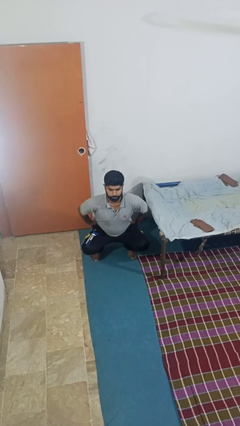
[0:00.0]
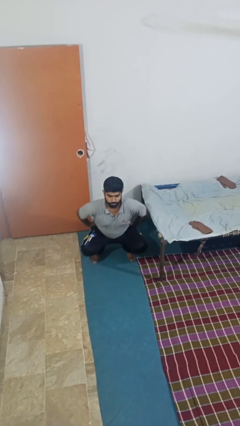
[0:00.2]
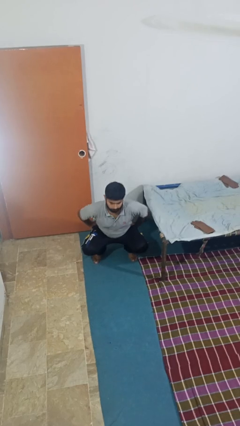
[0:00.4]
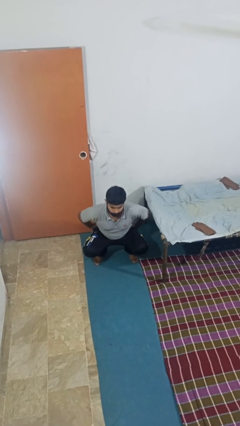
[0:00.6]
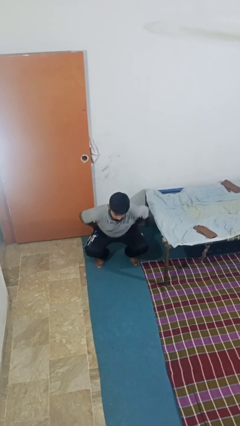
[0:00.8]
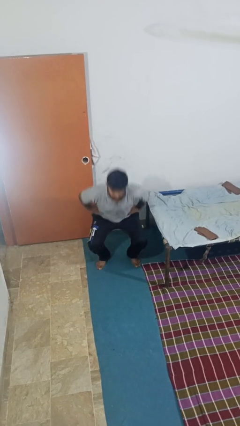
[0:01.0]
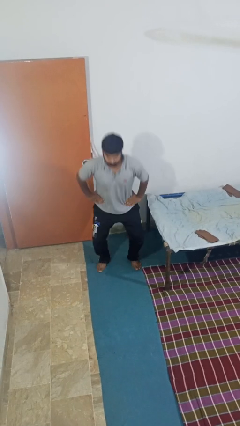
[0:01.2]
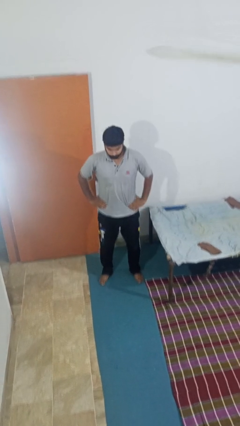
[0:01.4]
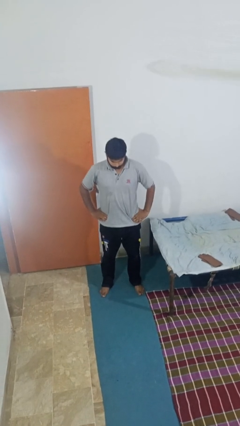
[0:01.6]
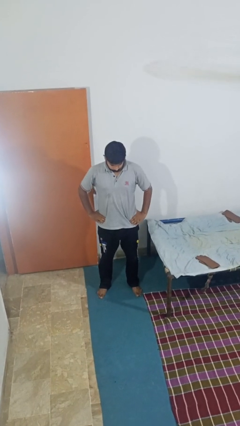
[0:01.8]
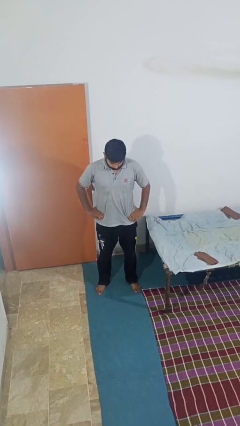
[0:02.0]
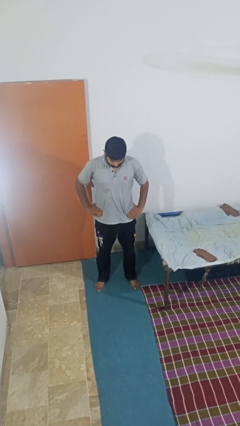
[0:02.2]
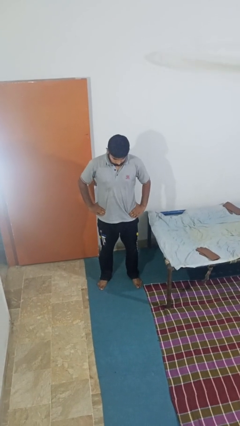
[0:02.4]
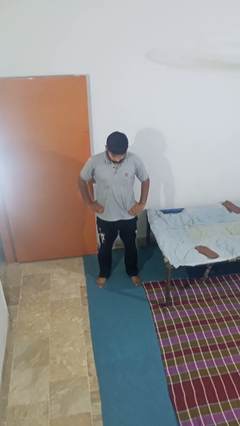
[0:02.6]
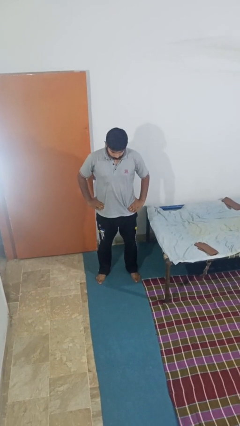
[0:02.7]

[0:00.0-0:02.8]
person stands up

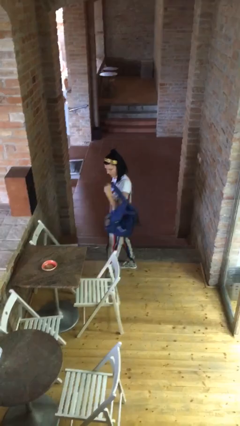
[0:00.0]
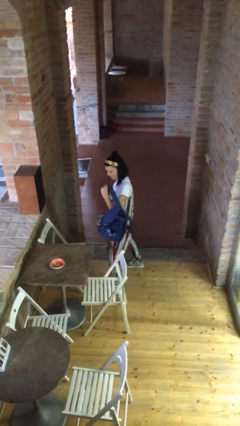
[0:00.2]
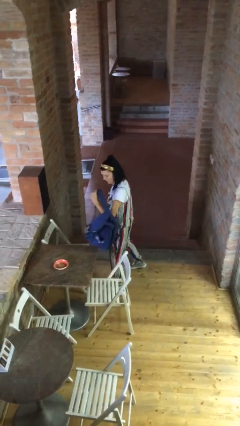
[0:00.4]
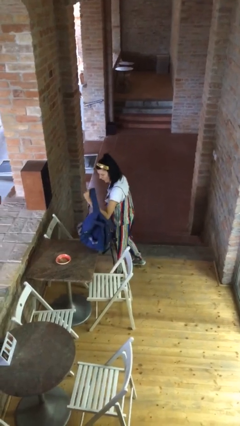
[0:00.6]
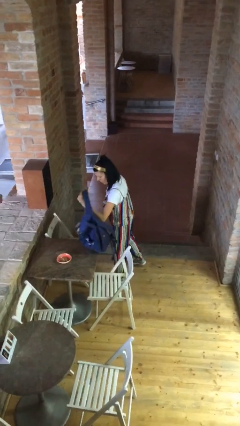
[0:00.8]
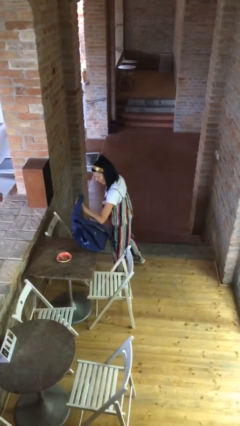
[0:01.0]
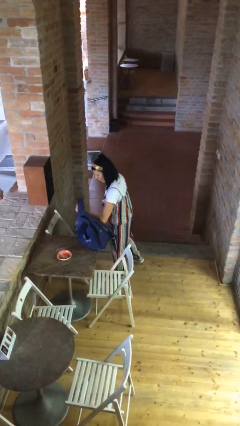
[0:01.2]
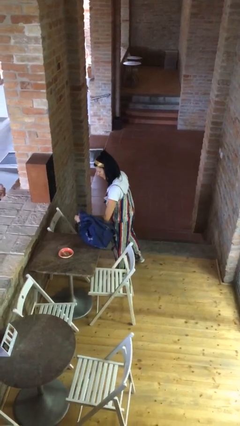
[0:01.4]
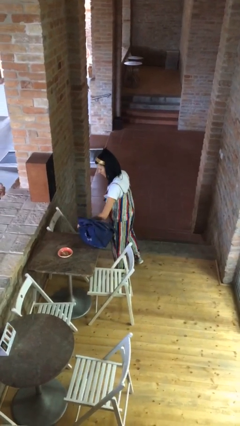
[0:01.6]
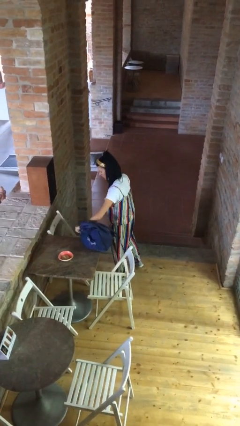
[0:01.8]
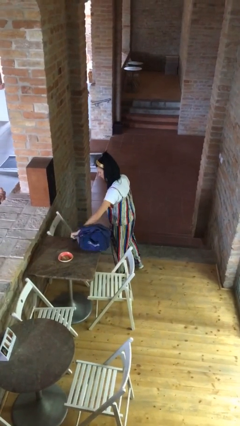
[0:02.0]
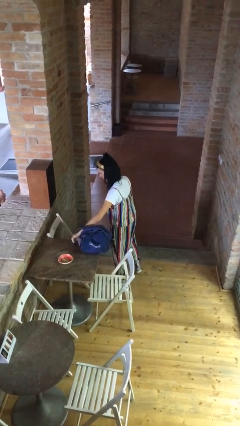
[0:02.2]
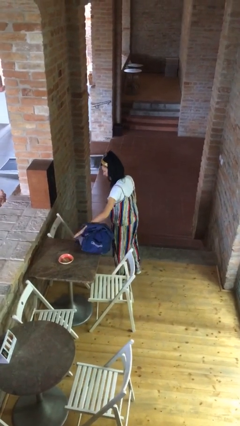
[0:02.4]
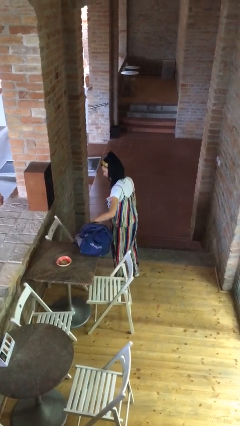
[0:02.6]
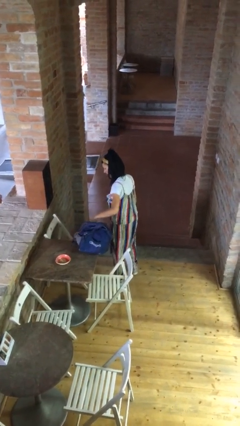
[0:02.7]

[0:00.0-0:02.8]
person puts down object on table

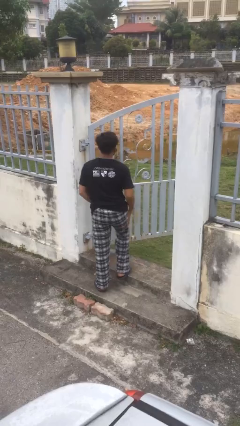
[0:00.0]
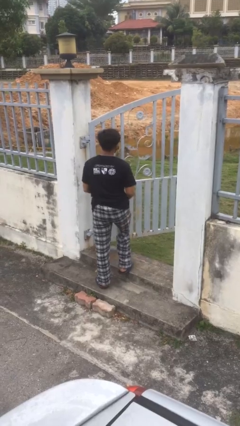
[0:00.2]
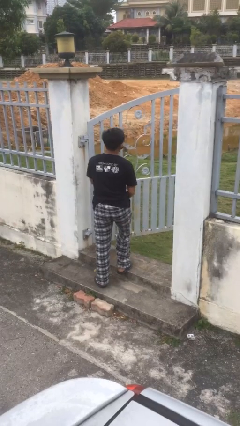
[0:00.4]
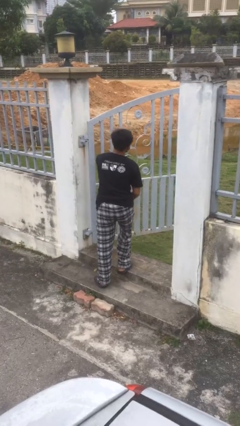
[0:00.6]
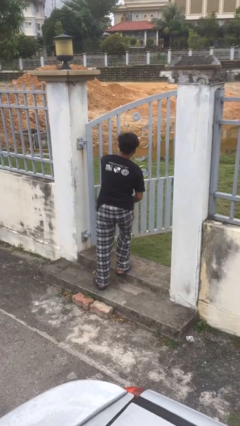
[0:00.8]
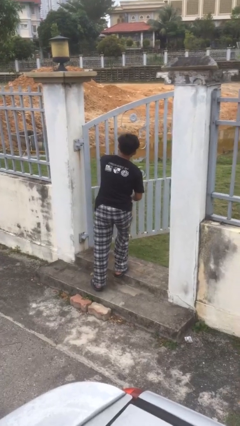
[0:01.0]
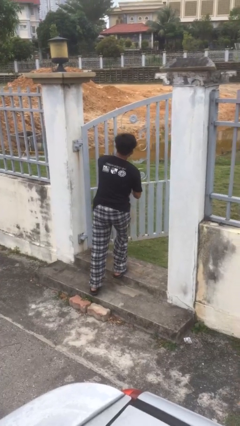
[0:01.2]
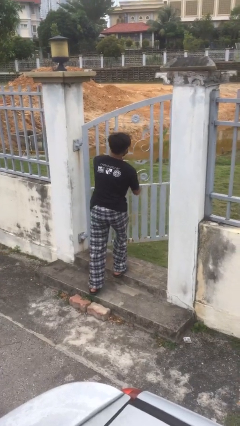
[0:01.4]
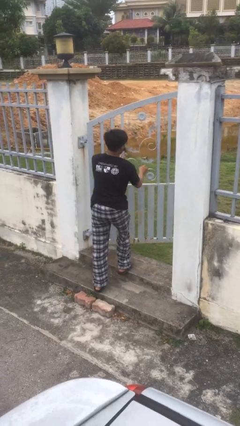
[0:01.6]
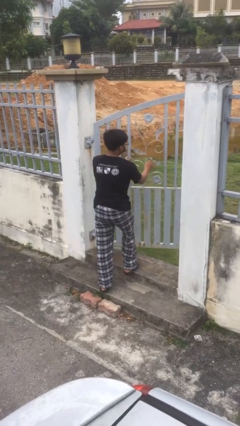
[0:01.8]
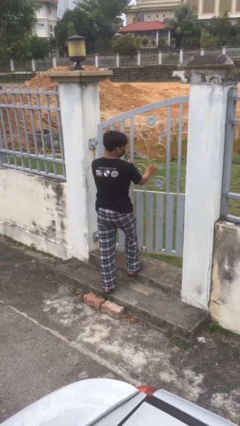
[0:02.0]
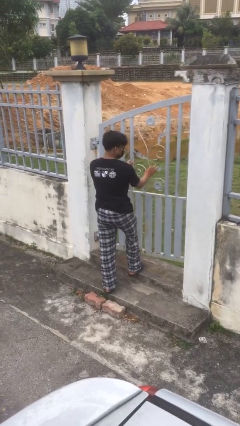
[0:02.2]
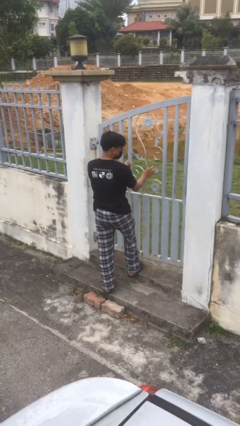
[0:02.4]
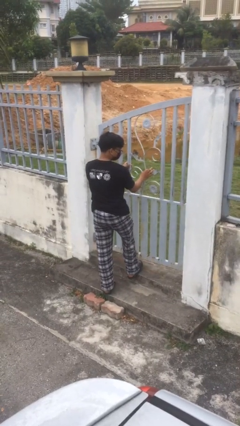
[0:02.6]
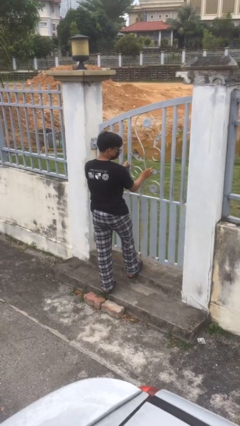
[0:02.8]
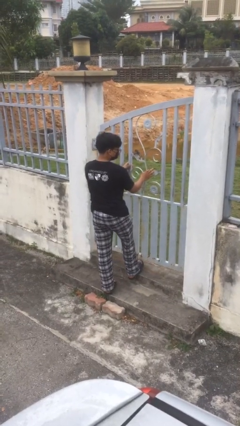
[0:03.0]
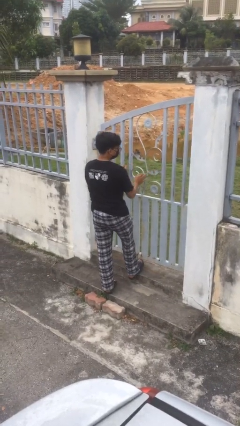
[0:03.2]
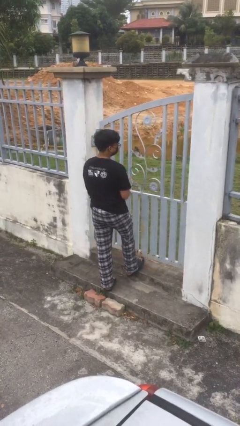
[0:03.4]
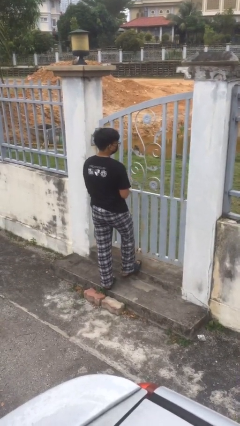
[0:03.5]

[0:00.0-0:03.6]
person closes facility door

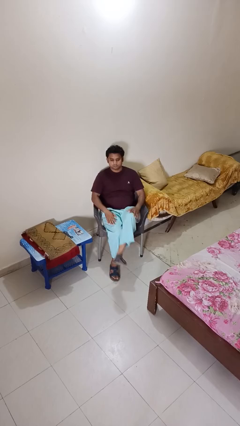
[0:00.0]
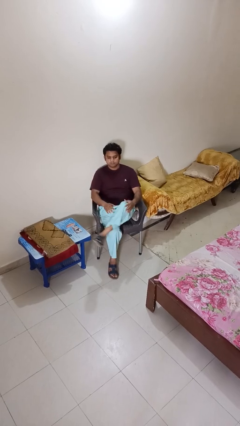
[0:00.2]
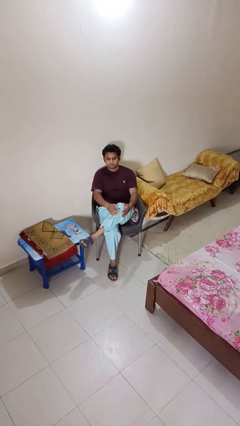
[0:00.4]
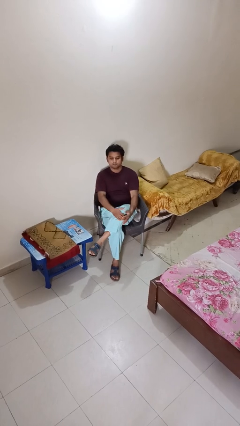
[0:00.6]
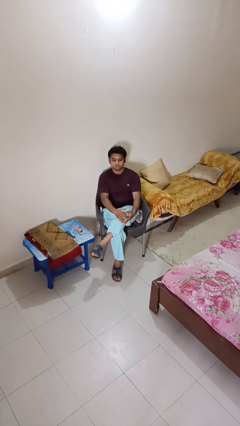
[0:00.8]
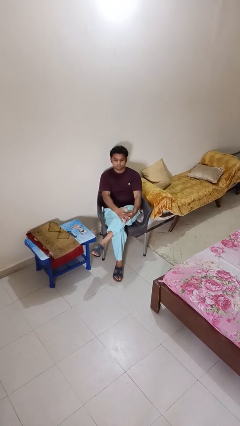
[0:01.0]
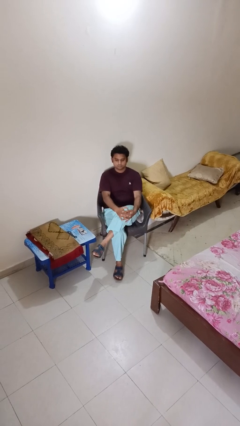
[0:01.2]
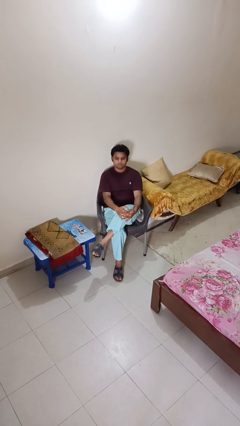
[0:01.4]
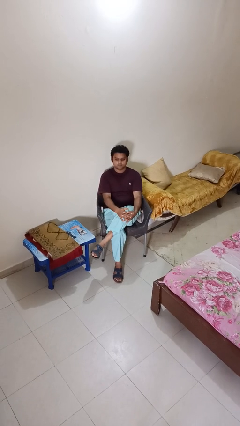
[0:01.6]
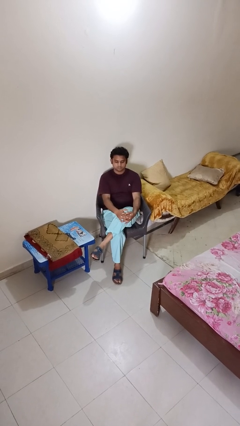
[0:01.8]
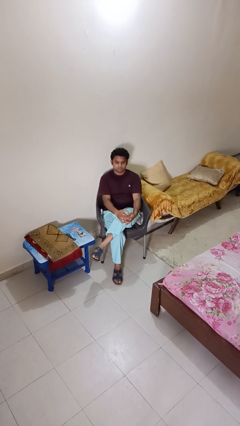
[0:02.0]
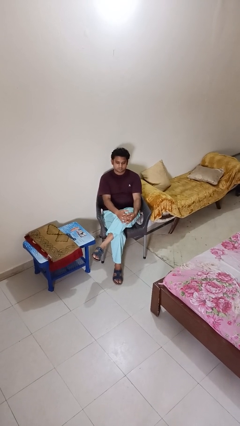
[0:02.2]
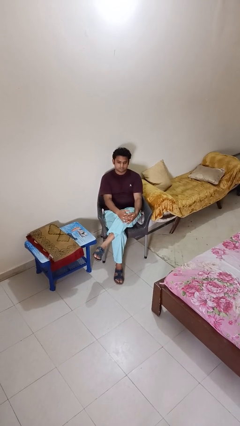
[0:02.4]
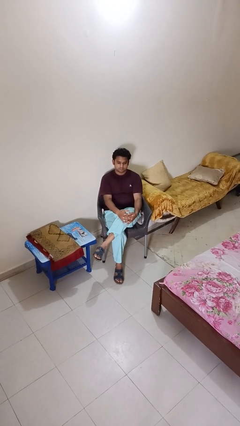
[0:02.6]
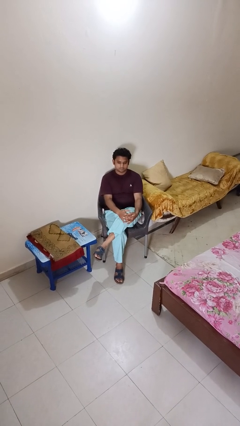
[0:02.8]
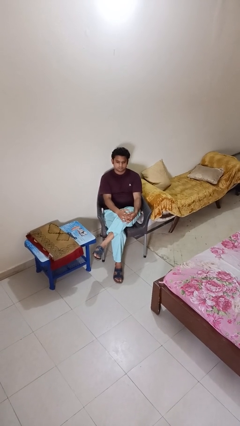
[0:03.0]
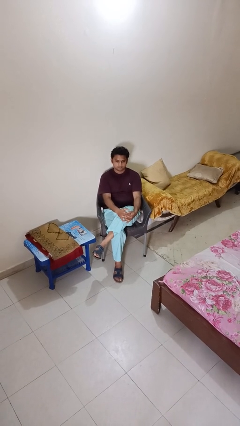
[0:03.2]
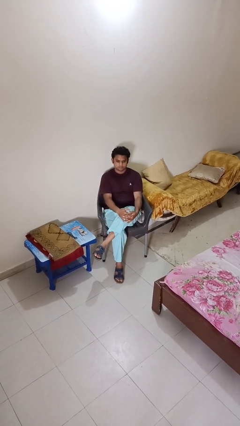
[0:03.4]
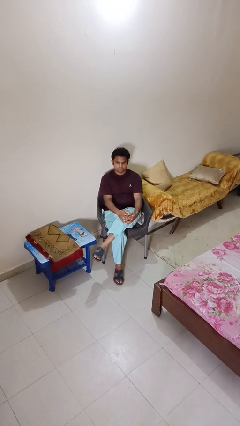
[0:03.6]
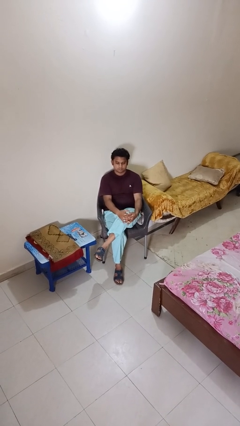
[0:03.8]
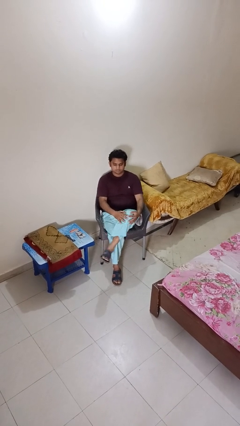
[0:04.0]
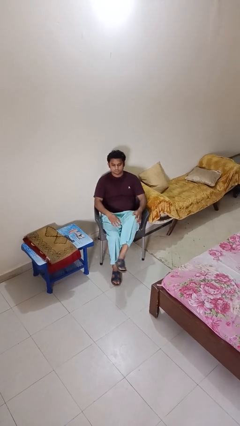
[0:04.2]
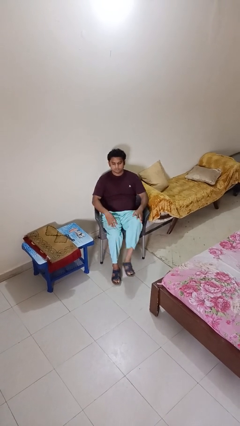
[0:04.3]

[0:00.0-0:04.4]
person crosses legs

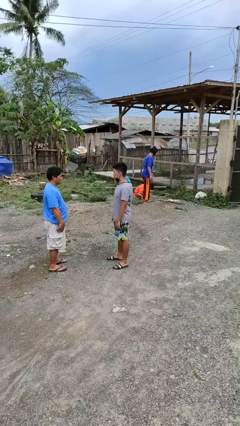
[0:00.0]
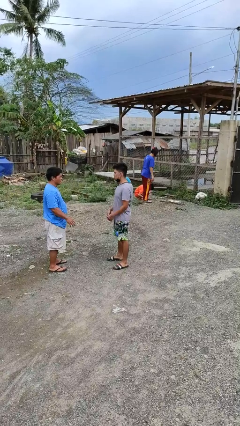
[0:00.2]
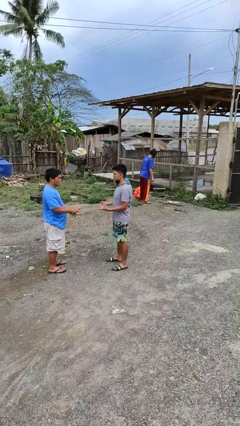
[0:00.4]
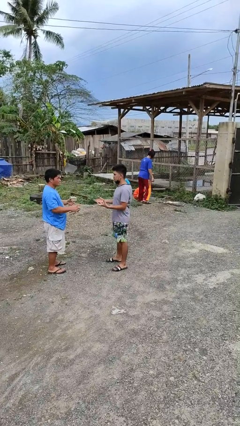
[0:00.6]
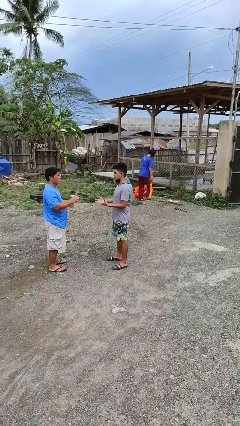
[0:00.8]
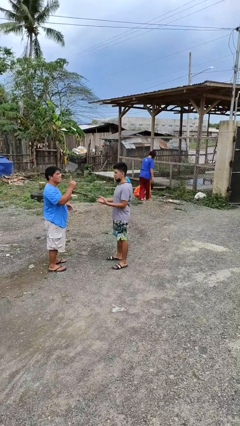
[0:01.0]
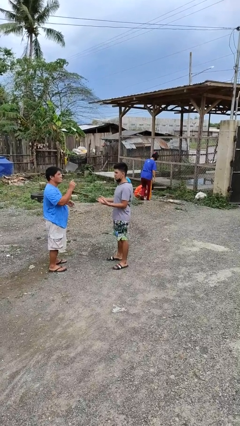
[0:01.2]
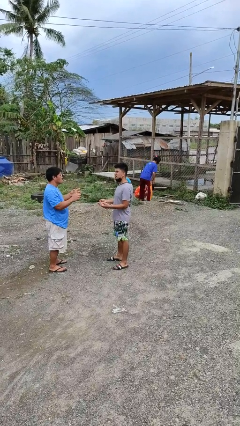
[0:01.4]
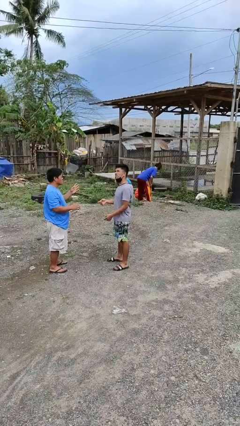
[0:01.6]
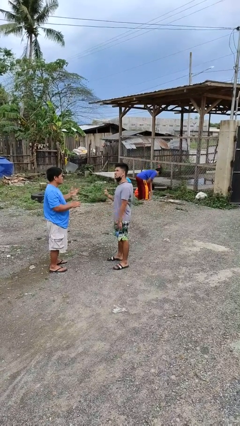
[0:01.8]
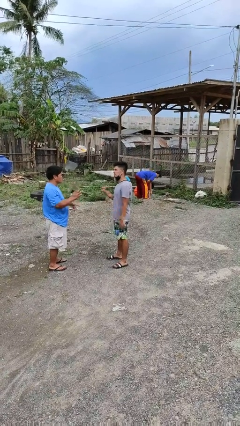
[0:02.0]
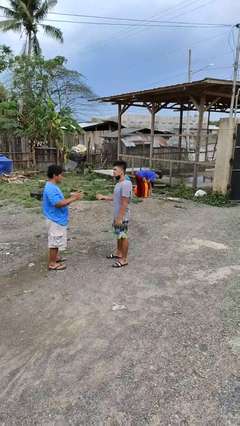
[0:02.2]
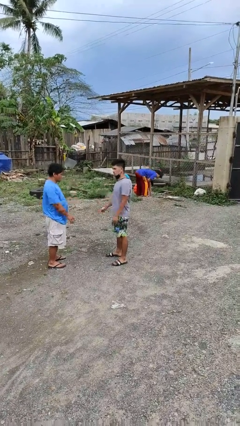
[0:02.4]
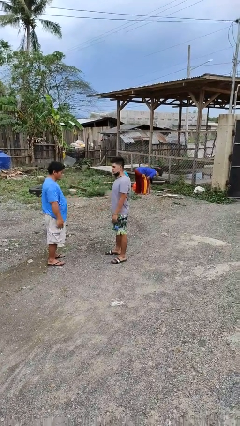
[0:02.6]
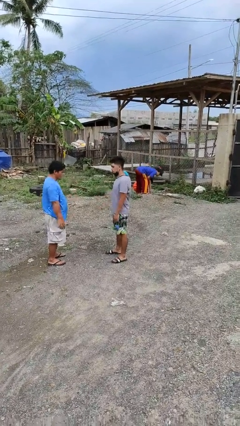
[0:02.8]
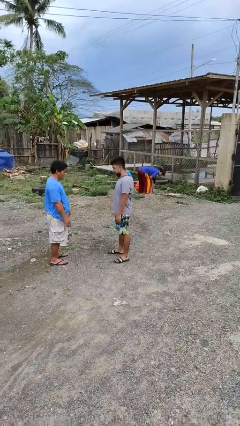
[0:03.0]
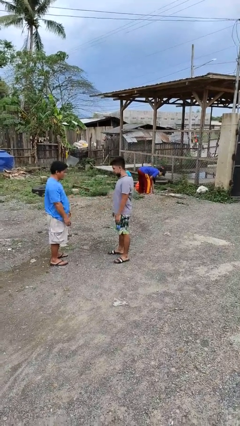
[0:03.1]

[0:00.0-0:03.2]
person talks to person

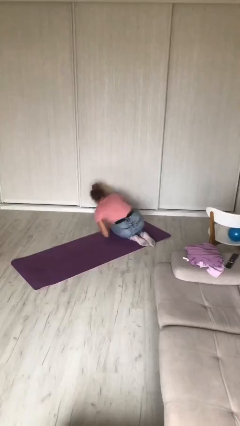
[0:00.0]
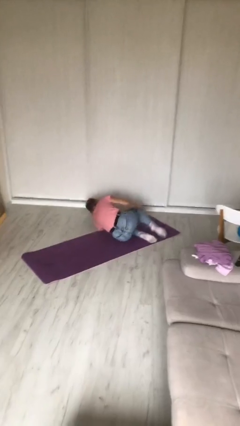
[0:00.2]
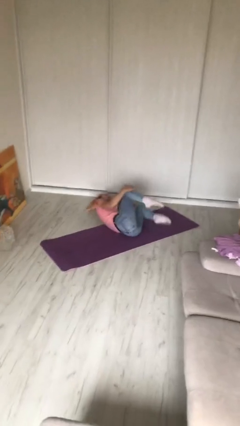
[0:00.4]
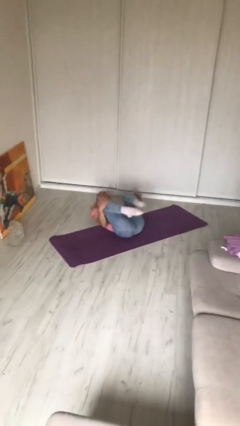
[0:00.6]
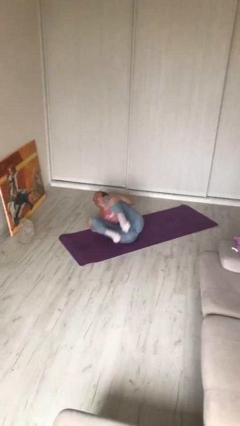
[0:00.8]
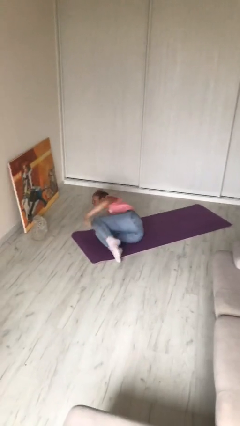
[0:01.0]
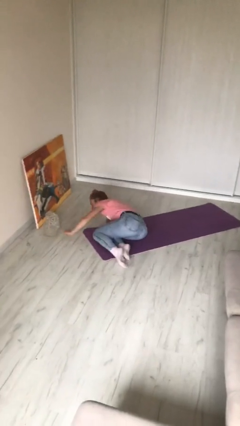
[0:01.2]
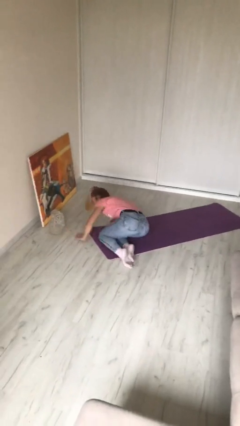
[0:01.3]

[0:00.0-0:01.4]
person somersaults
